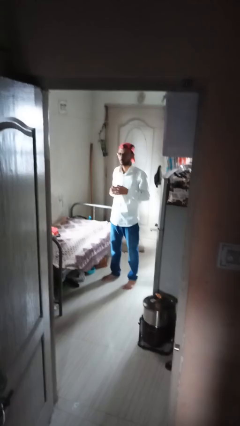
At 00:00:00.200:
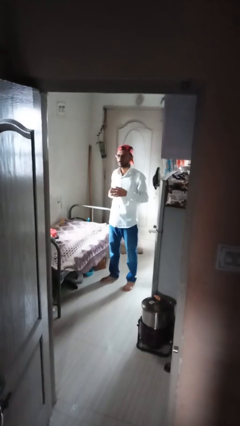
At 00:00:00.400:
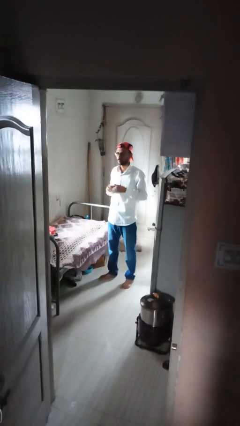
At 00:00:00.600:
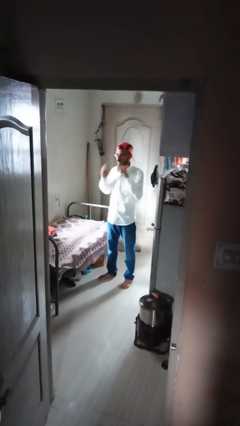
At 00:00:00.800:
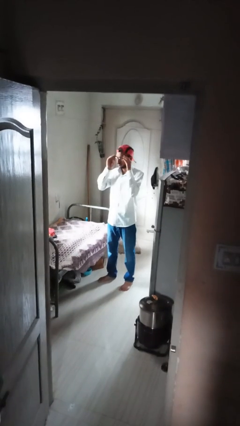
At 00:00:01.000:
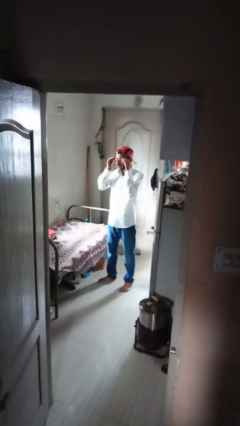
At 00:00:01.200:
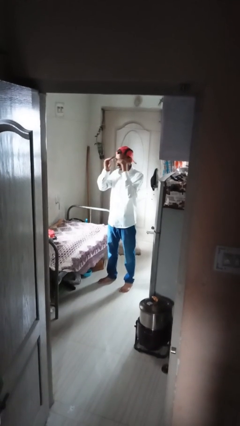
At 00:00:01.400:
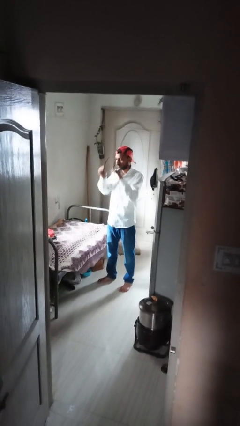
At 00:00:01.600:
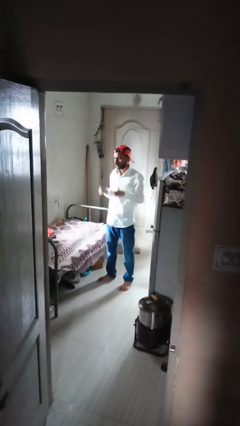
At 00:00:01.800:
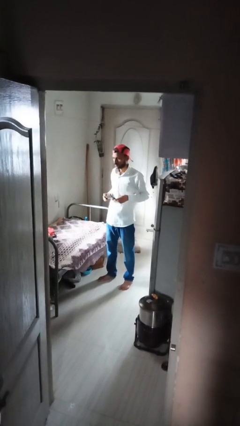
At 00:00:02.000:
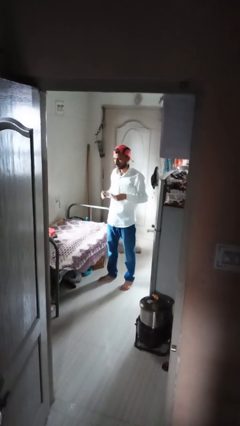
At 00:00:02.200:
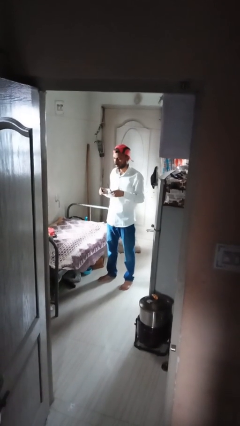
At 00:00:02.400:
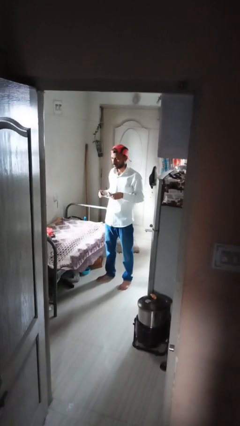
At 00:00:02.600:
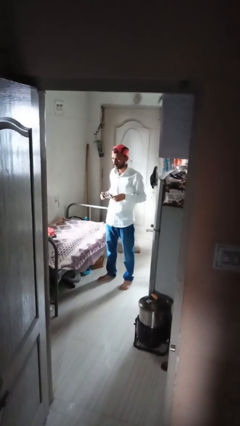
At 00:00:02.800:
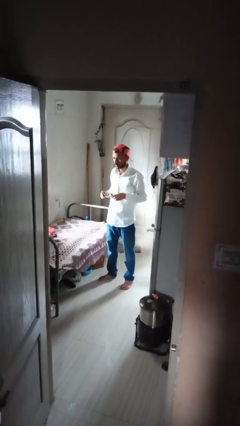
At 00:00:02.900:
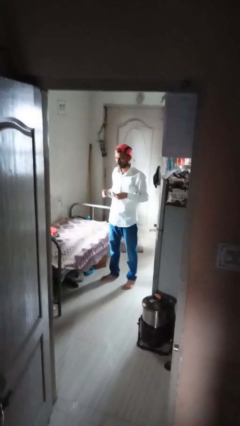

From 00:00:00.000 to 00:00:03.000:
person takes off glasses

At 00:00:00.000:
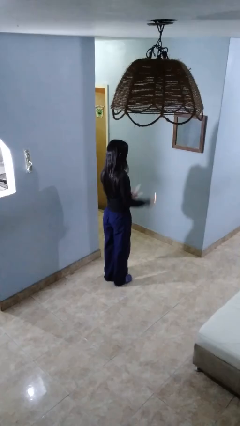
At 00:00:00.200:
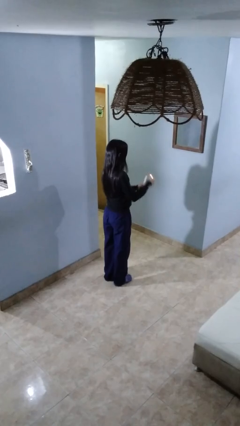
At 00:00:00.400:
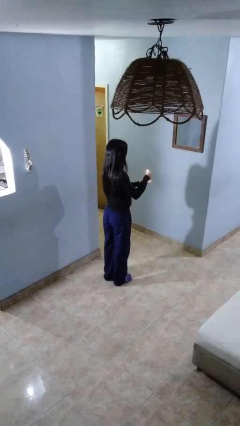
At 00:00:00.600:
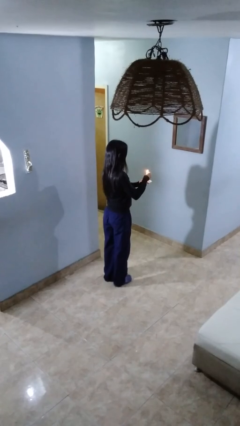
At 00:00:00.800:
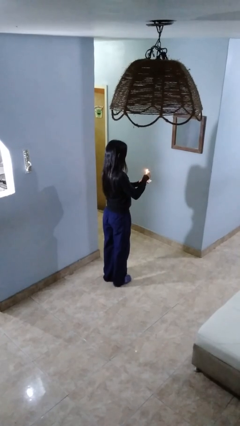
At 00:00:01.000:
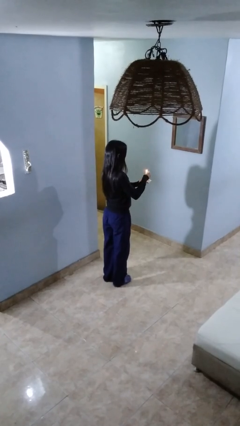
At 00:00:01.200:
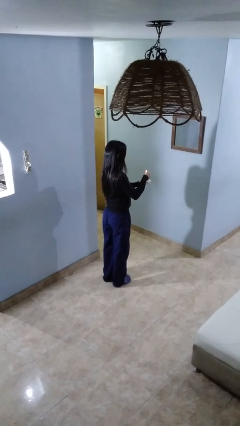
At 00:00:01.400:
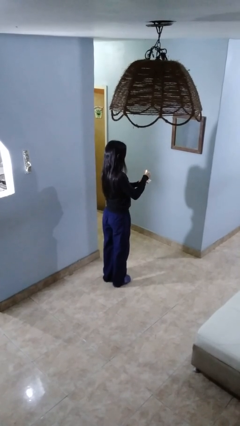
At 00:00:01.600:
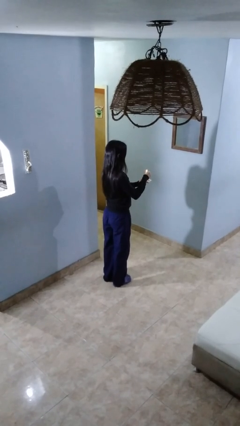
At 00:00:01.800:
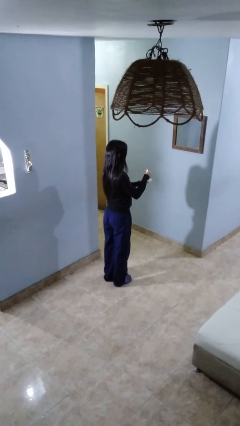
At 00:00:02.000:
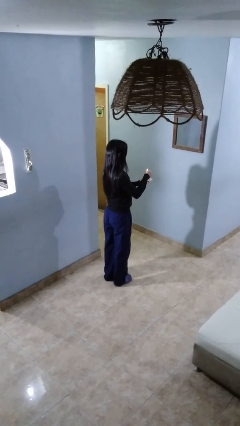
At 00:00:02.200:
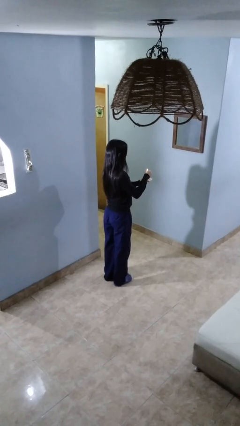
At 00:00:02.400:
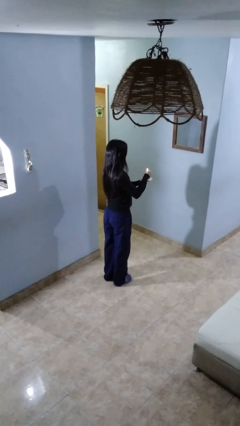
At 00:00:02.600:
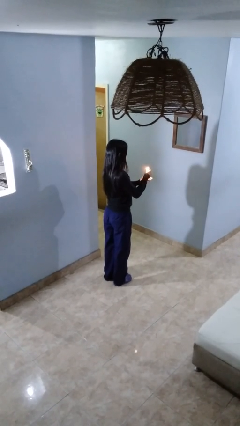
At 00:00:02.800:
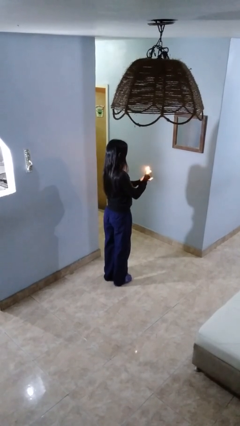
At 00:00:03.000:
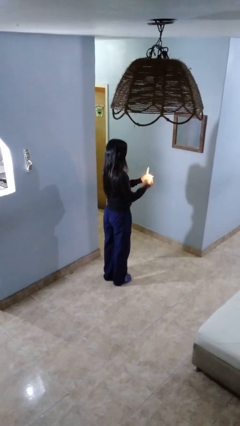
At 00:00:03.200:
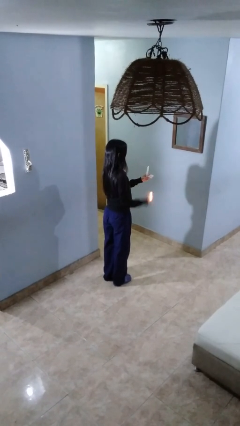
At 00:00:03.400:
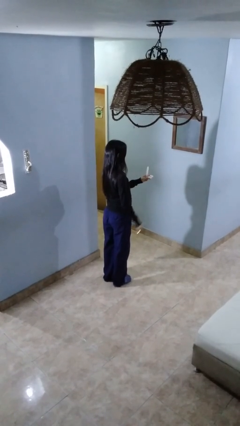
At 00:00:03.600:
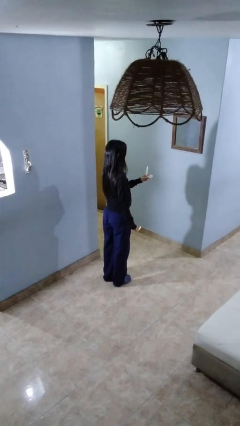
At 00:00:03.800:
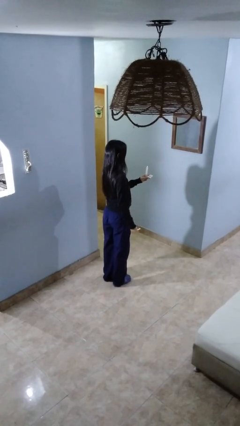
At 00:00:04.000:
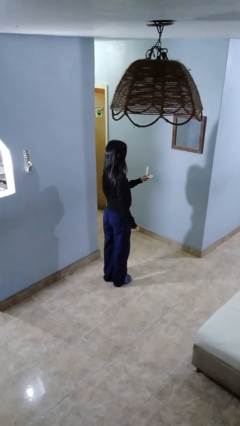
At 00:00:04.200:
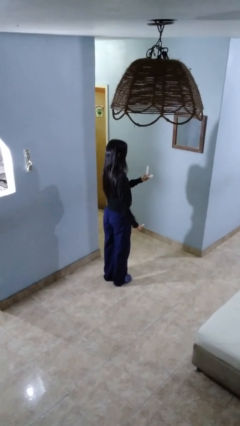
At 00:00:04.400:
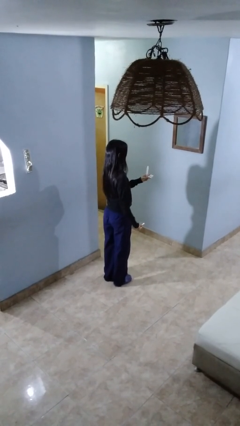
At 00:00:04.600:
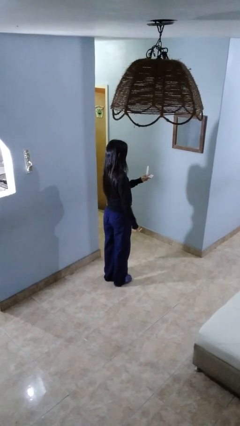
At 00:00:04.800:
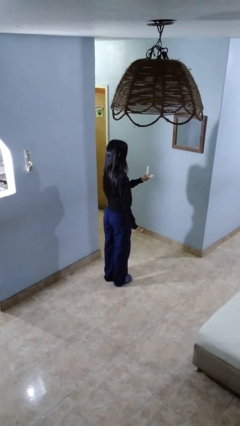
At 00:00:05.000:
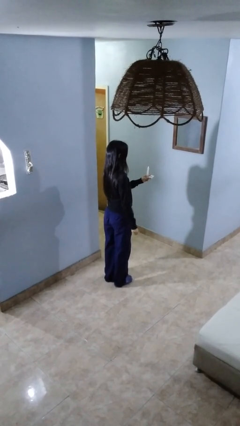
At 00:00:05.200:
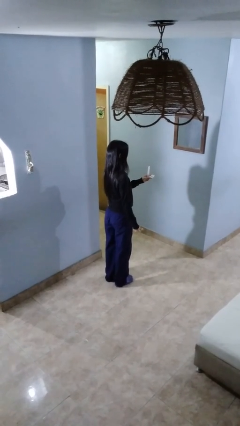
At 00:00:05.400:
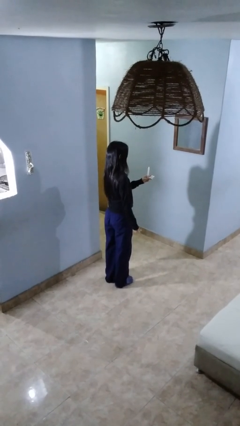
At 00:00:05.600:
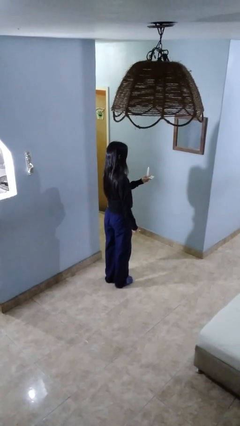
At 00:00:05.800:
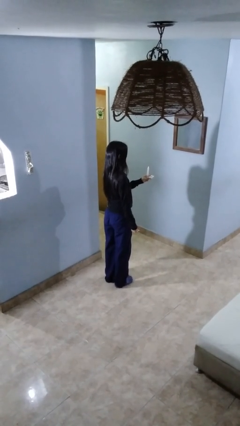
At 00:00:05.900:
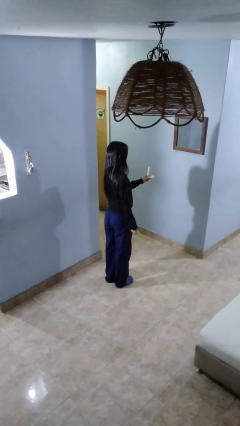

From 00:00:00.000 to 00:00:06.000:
person lights candle

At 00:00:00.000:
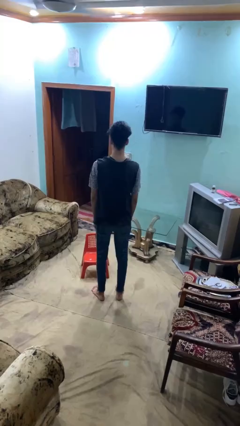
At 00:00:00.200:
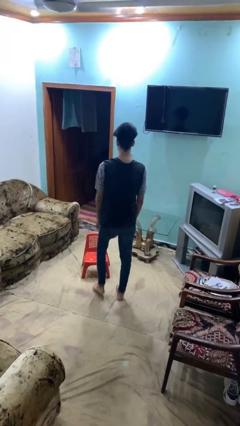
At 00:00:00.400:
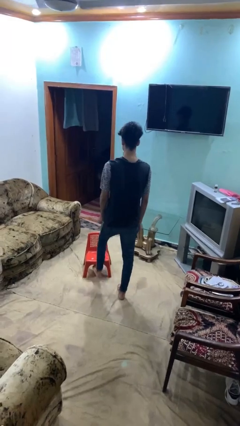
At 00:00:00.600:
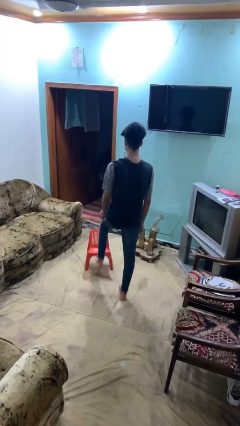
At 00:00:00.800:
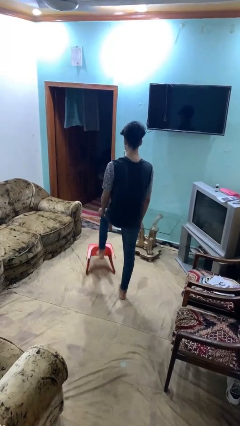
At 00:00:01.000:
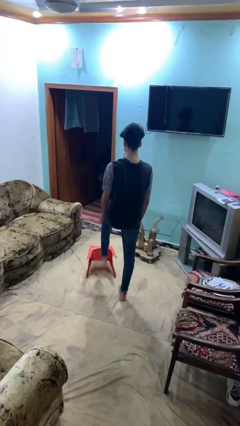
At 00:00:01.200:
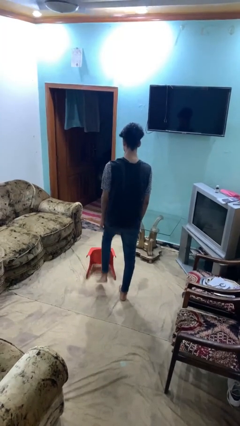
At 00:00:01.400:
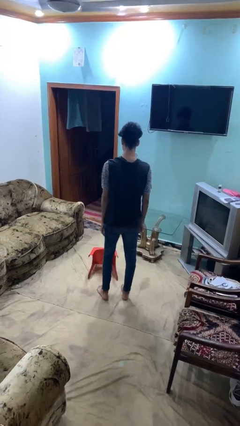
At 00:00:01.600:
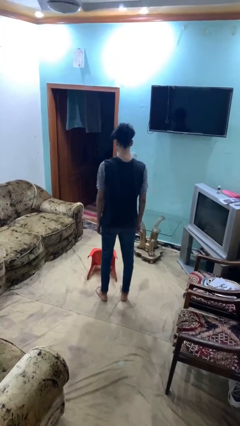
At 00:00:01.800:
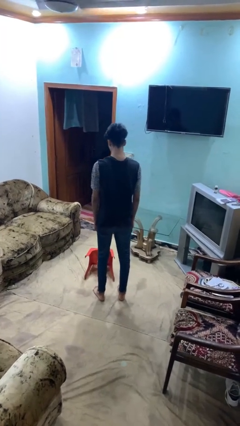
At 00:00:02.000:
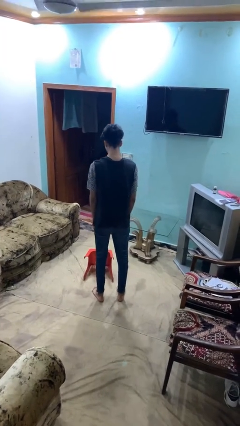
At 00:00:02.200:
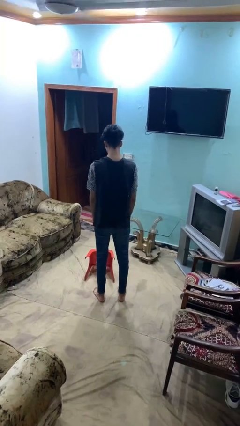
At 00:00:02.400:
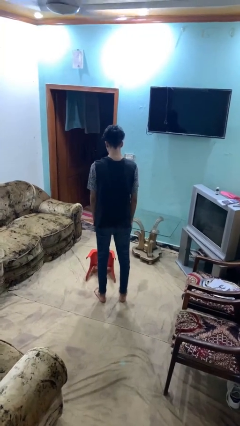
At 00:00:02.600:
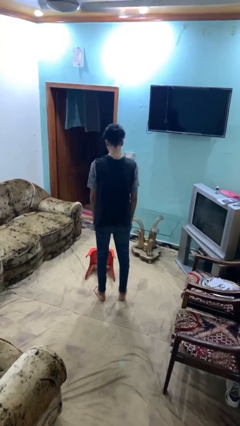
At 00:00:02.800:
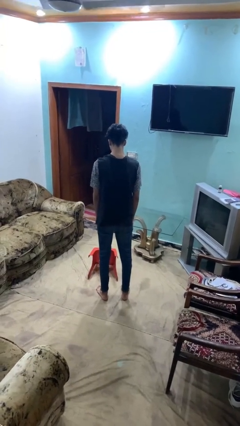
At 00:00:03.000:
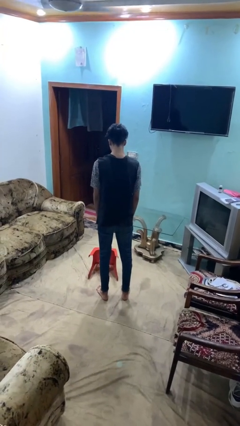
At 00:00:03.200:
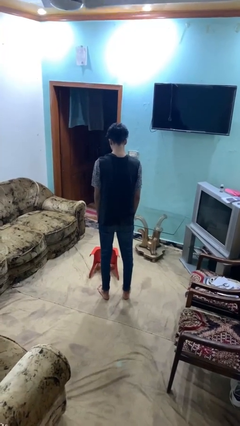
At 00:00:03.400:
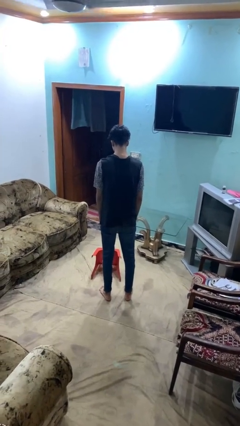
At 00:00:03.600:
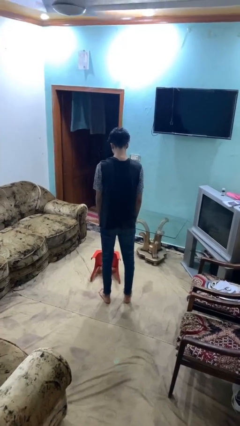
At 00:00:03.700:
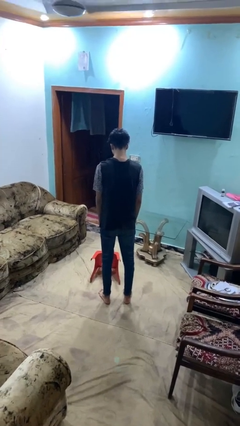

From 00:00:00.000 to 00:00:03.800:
person knocks over furniture

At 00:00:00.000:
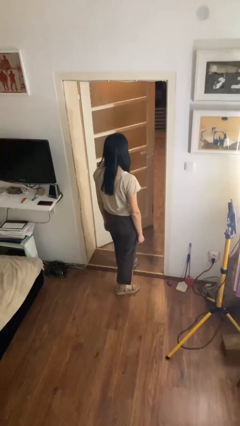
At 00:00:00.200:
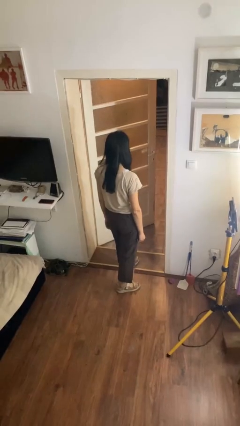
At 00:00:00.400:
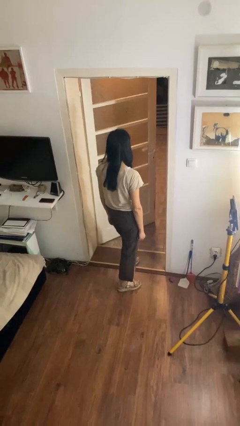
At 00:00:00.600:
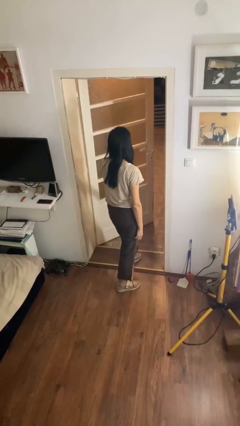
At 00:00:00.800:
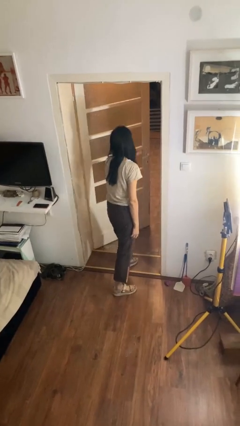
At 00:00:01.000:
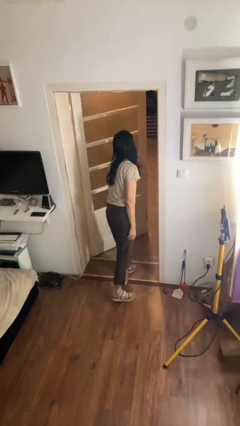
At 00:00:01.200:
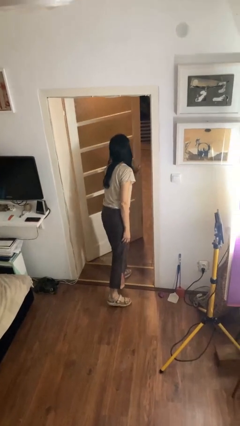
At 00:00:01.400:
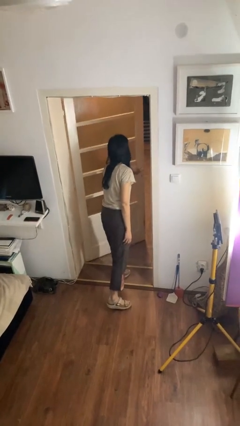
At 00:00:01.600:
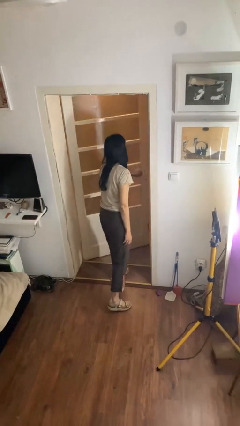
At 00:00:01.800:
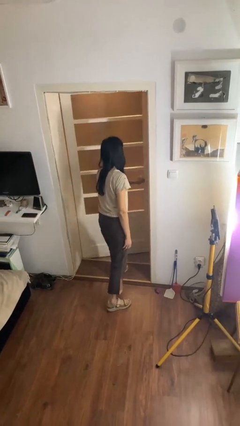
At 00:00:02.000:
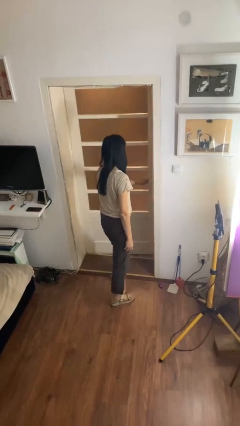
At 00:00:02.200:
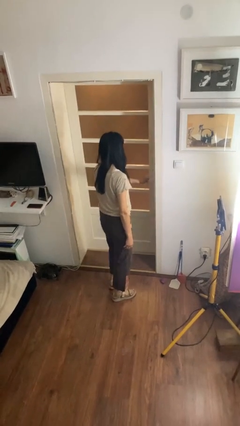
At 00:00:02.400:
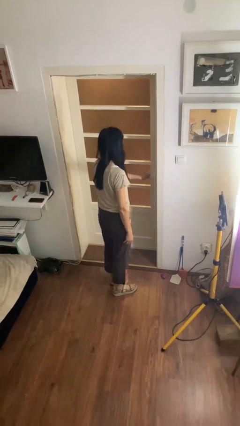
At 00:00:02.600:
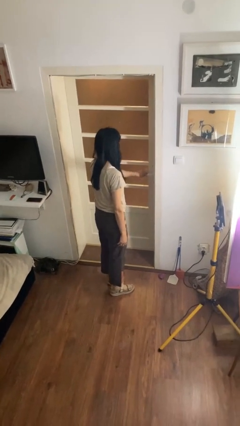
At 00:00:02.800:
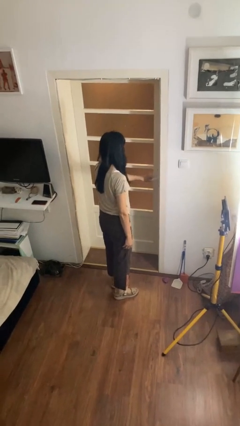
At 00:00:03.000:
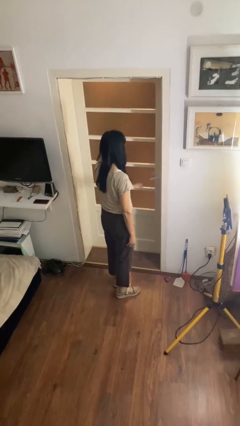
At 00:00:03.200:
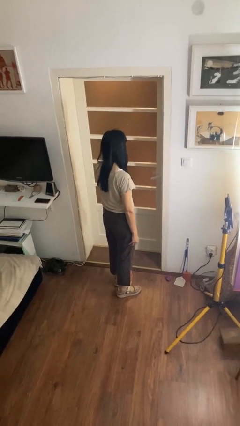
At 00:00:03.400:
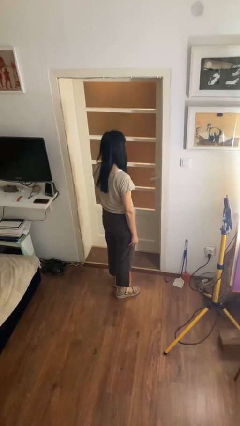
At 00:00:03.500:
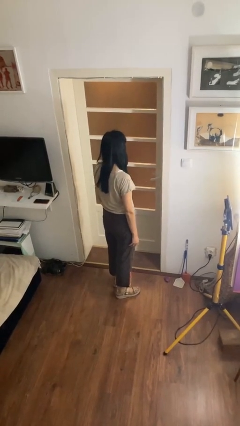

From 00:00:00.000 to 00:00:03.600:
person closes facility door

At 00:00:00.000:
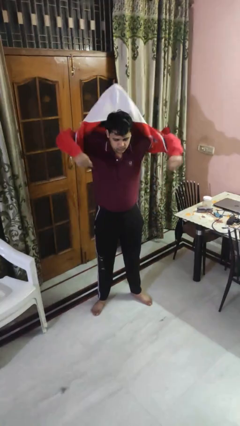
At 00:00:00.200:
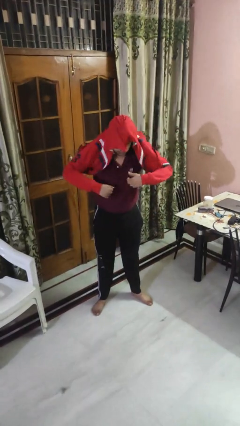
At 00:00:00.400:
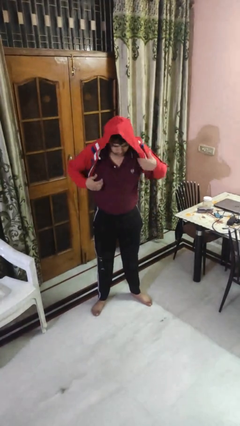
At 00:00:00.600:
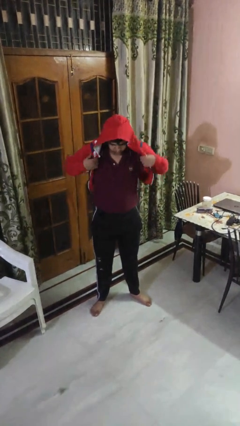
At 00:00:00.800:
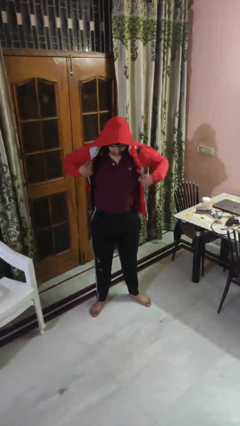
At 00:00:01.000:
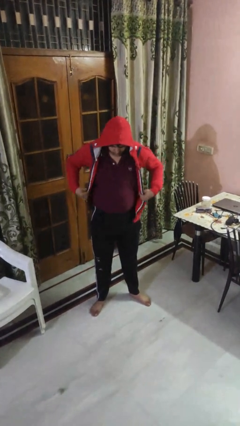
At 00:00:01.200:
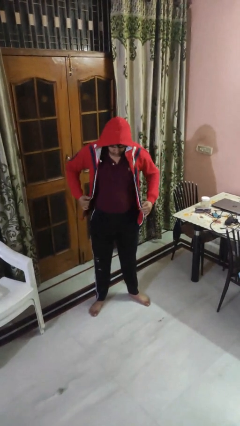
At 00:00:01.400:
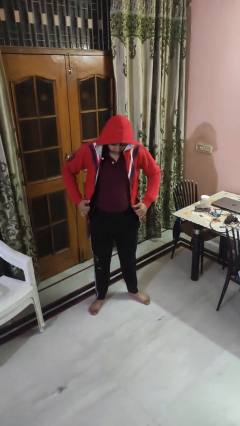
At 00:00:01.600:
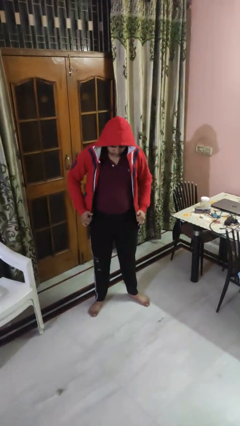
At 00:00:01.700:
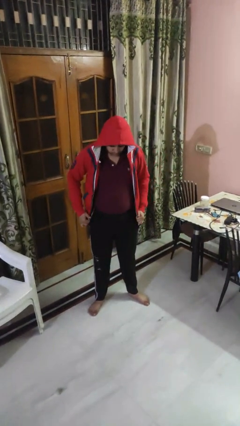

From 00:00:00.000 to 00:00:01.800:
person puts on hoodie
